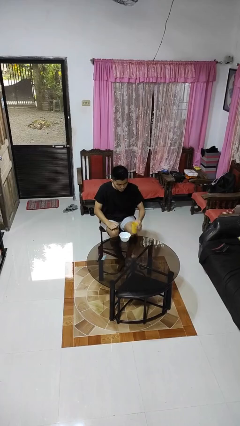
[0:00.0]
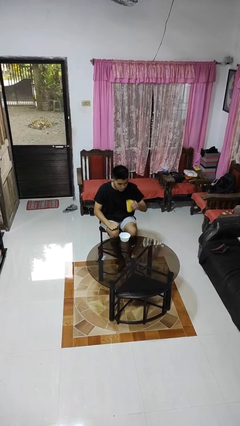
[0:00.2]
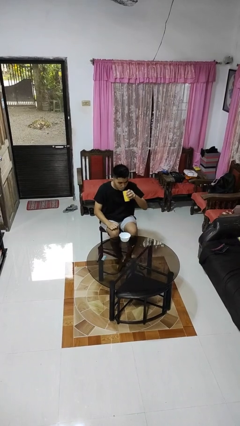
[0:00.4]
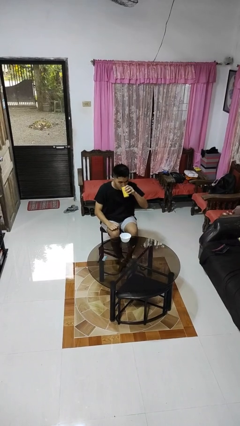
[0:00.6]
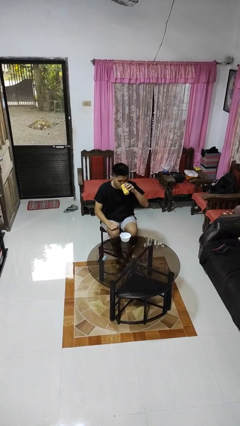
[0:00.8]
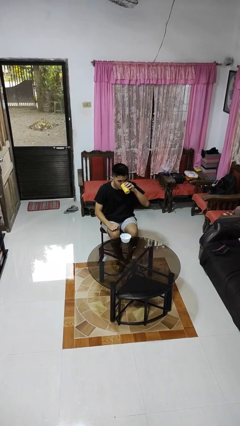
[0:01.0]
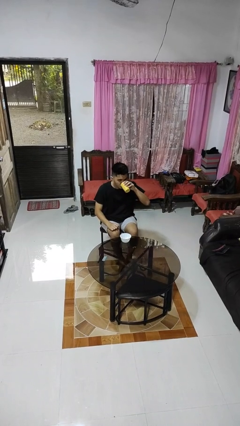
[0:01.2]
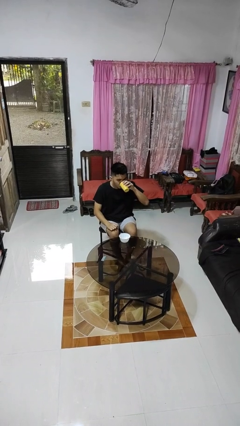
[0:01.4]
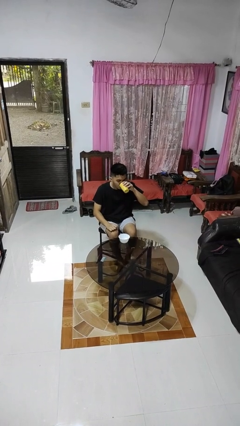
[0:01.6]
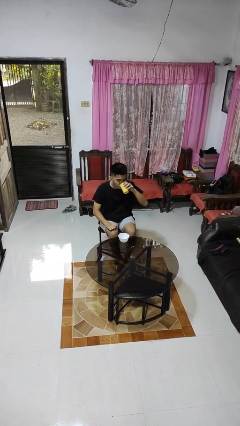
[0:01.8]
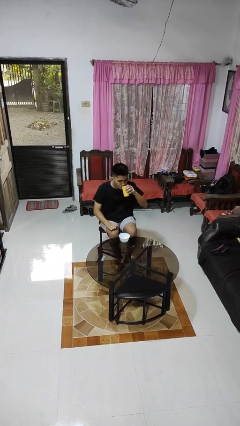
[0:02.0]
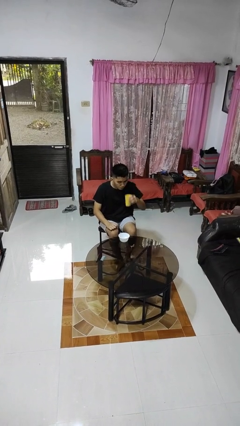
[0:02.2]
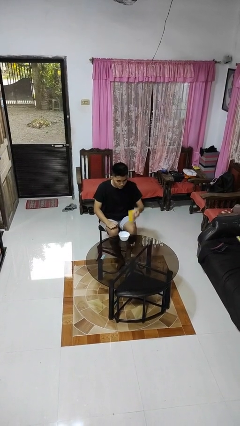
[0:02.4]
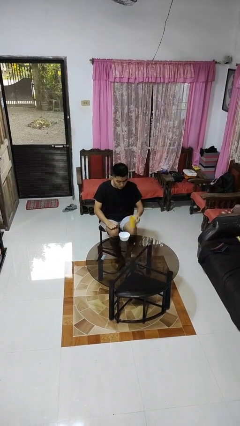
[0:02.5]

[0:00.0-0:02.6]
person drinks from cup

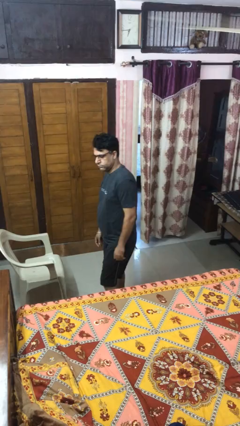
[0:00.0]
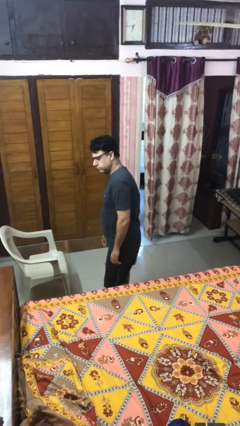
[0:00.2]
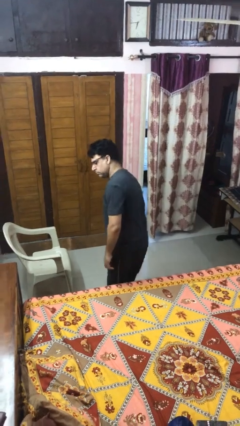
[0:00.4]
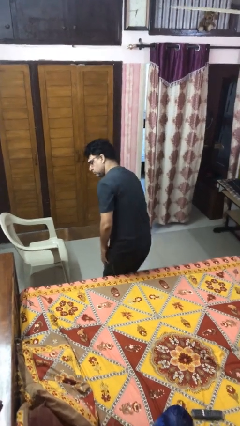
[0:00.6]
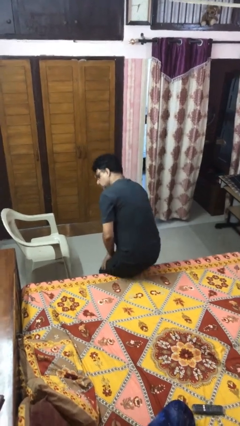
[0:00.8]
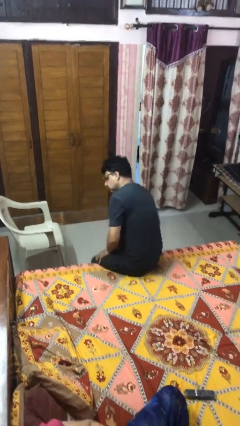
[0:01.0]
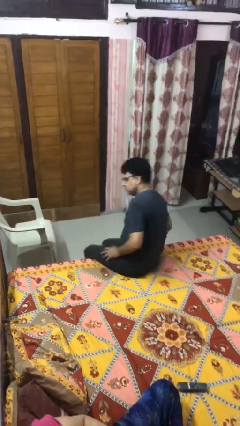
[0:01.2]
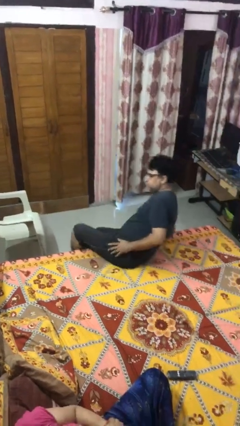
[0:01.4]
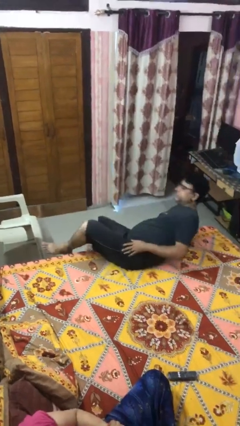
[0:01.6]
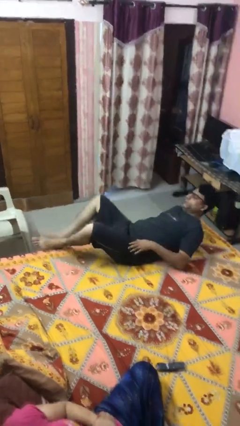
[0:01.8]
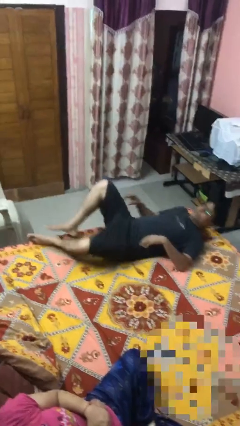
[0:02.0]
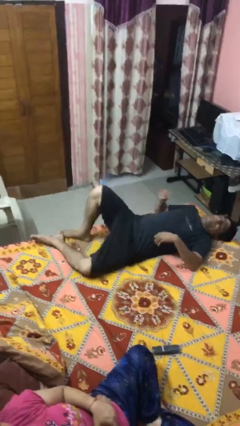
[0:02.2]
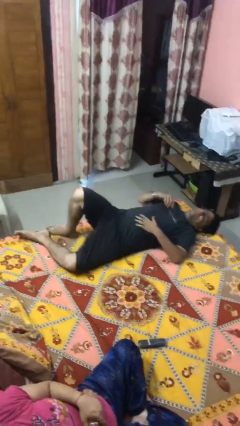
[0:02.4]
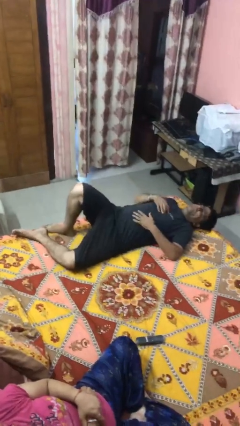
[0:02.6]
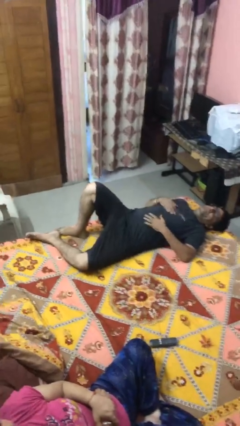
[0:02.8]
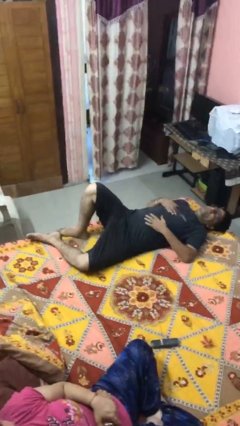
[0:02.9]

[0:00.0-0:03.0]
person lies down on bed

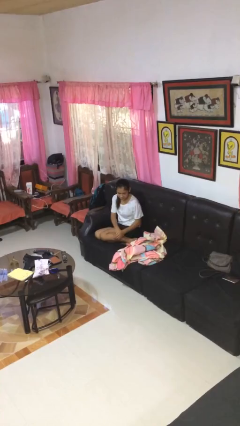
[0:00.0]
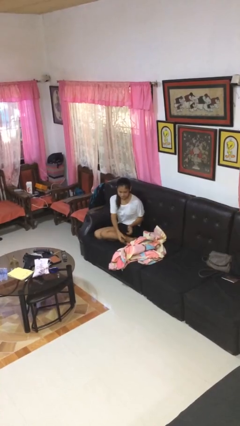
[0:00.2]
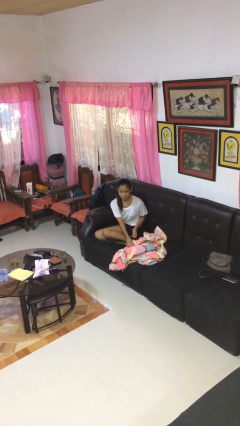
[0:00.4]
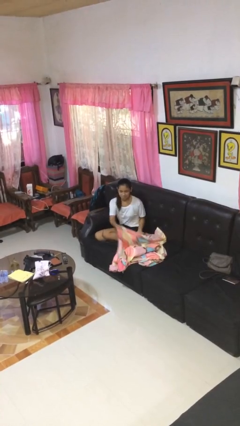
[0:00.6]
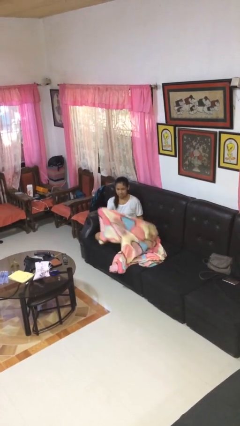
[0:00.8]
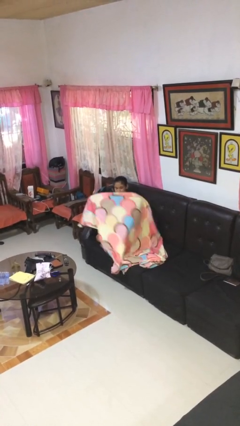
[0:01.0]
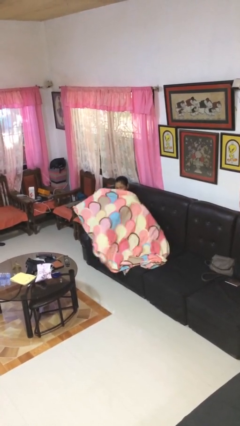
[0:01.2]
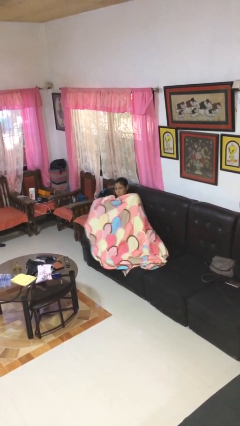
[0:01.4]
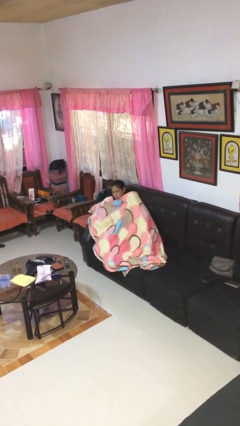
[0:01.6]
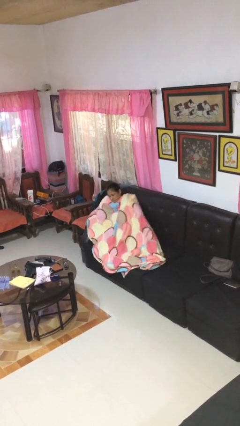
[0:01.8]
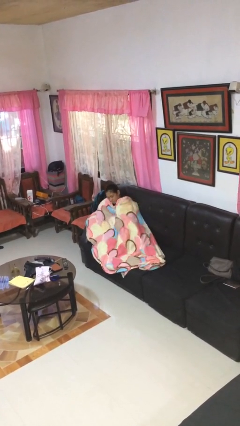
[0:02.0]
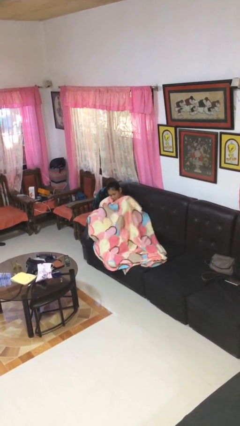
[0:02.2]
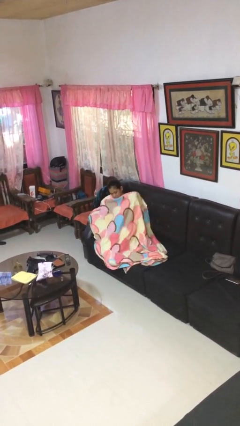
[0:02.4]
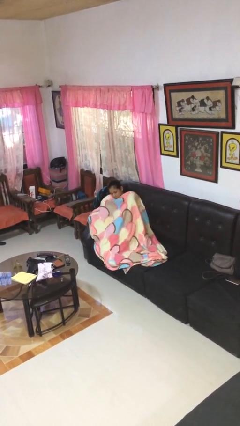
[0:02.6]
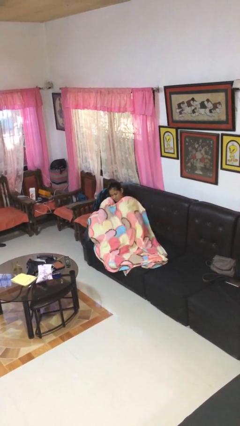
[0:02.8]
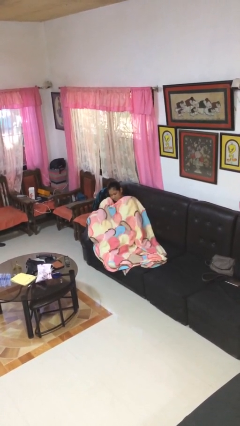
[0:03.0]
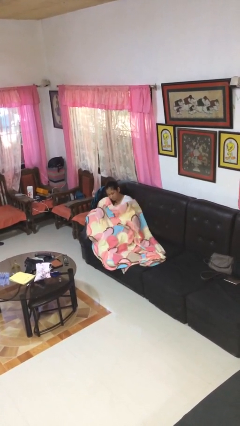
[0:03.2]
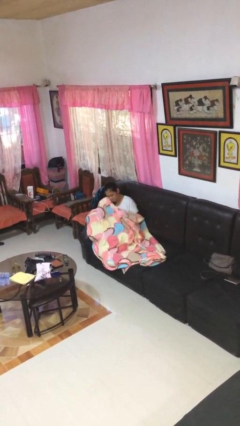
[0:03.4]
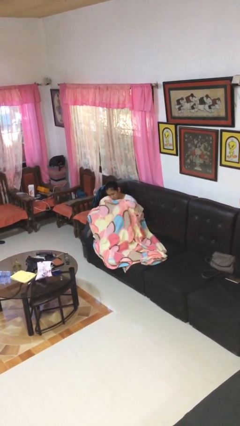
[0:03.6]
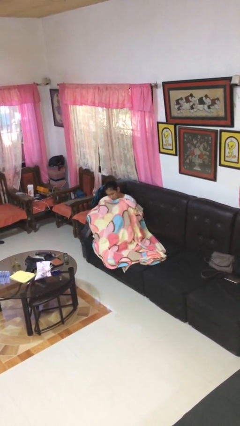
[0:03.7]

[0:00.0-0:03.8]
person covers with blanket

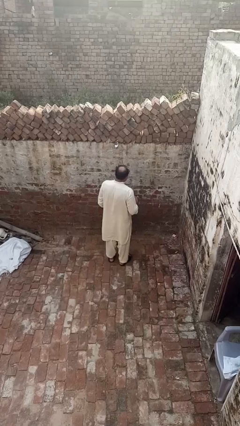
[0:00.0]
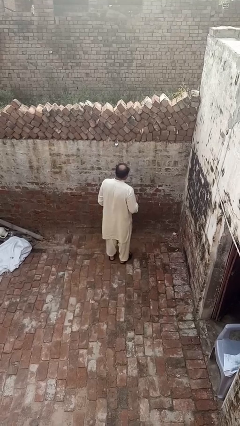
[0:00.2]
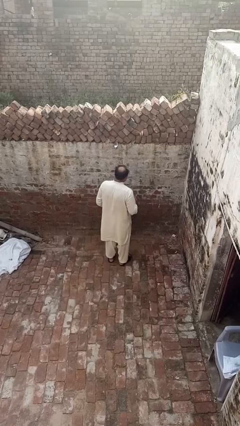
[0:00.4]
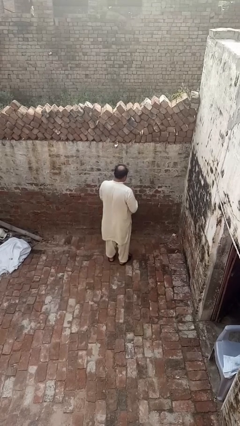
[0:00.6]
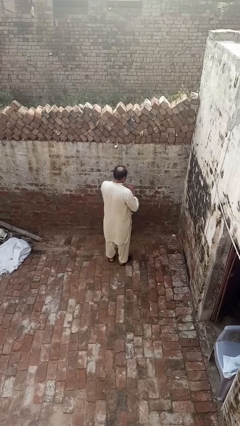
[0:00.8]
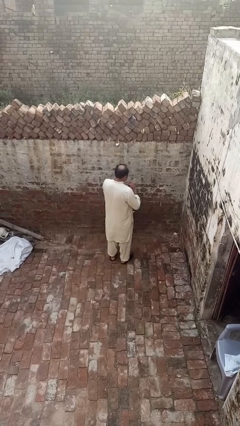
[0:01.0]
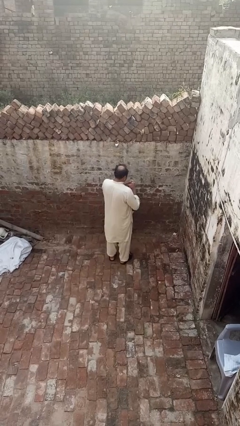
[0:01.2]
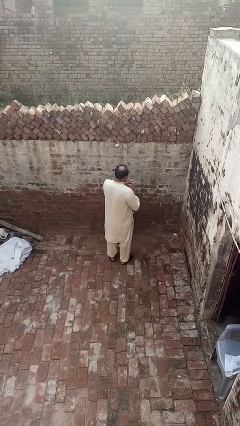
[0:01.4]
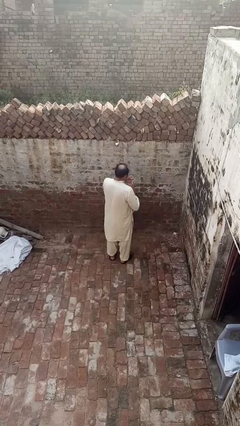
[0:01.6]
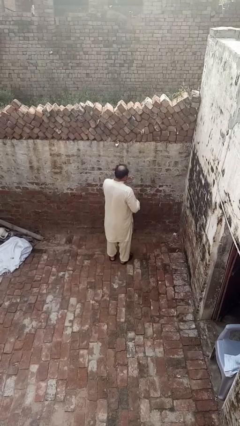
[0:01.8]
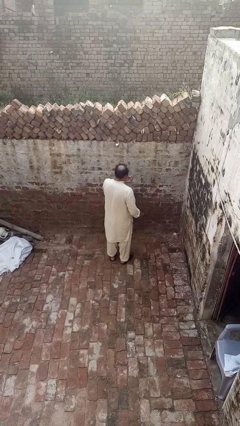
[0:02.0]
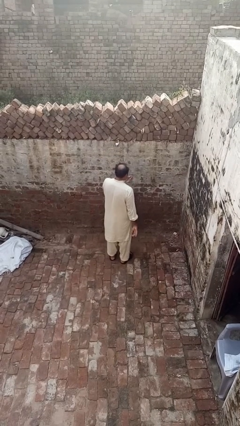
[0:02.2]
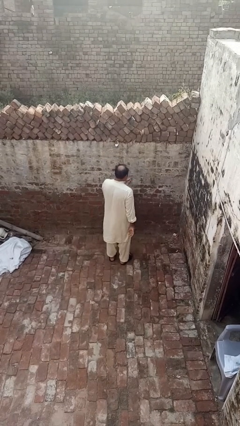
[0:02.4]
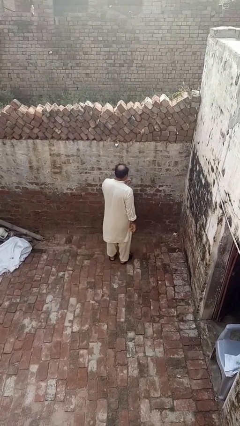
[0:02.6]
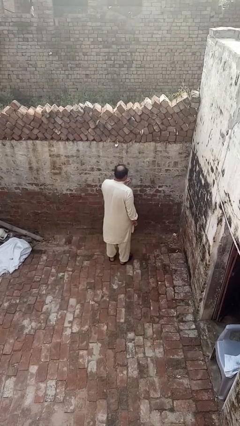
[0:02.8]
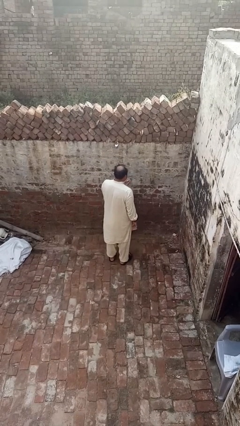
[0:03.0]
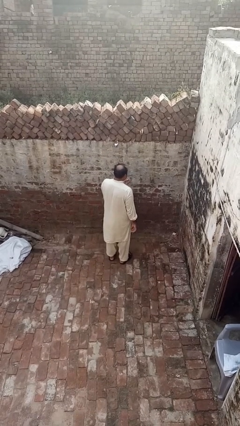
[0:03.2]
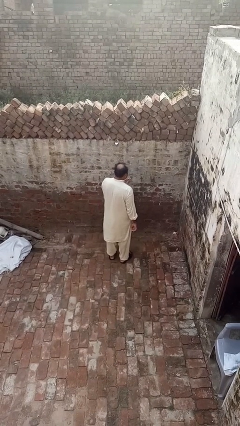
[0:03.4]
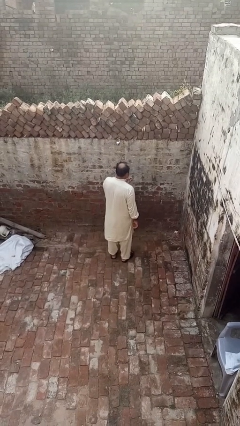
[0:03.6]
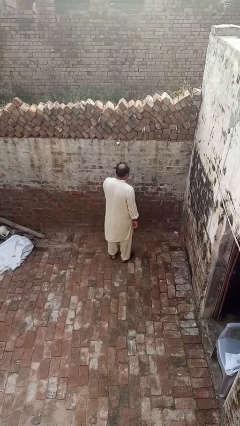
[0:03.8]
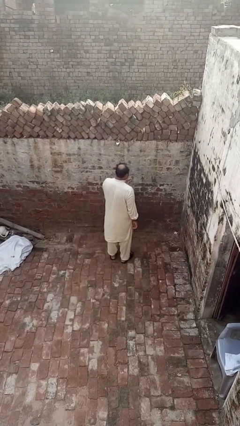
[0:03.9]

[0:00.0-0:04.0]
person takes off ring

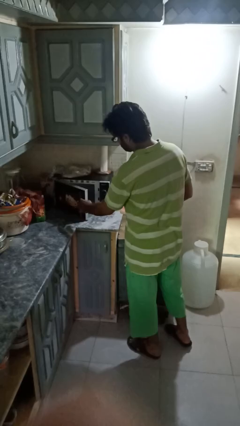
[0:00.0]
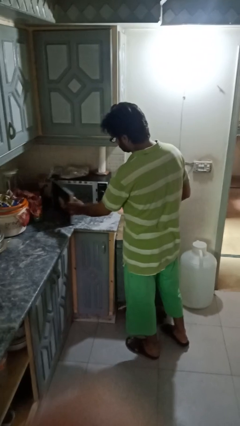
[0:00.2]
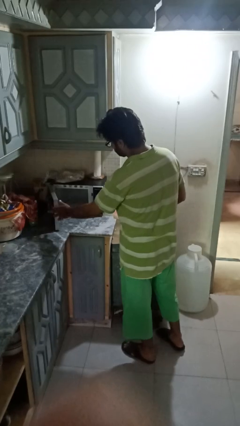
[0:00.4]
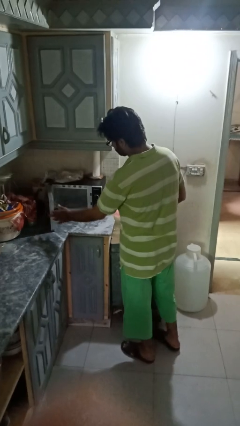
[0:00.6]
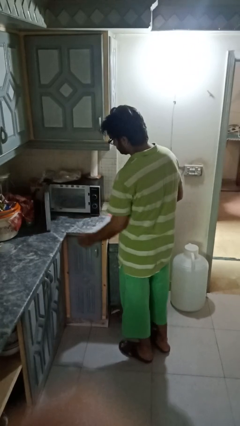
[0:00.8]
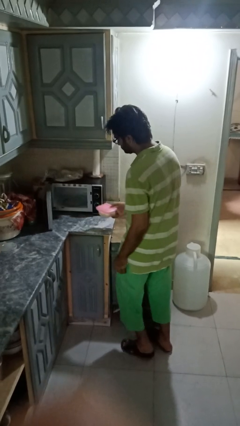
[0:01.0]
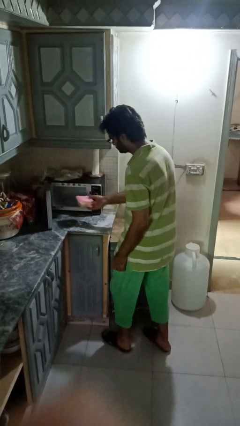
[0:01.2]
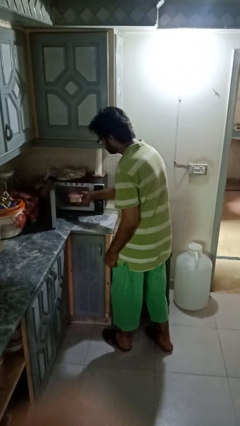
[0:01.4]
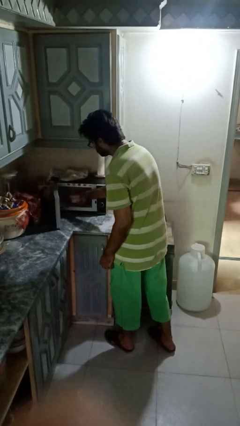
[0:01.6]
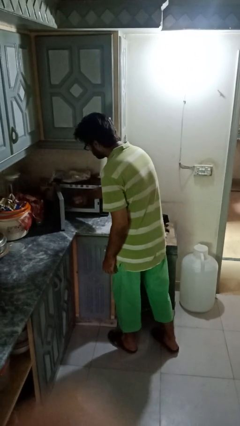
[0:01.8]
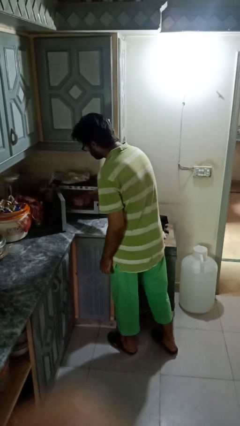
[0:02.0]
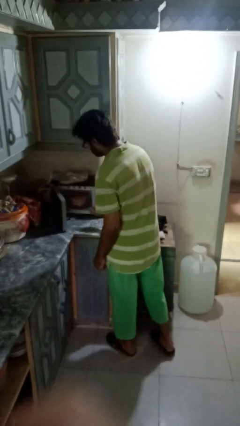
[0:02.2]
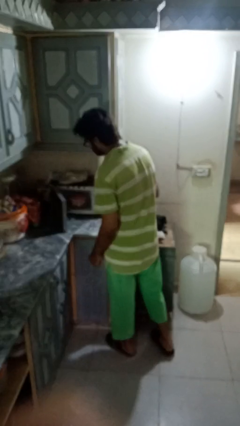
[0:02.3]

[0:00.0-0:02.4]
person puts object into microwave

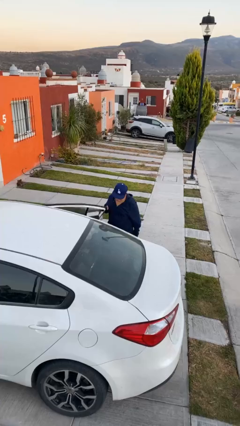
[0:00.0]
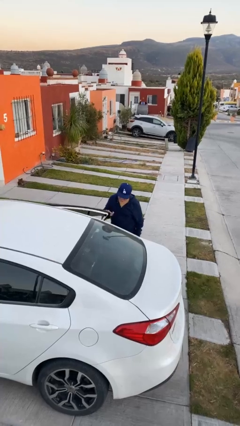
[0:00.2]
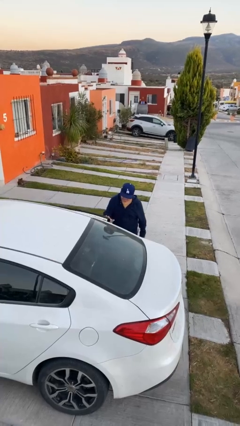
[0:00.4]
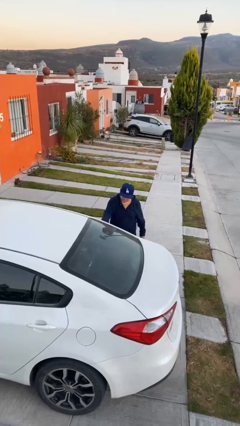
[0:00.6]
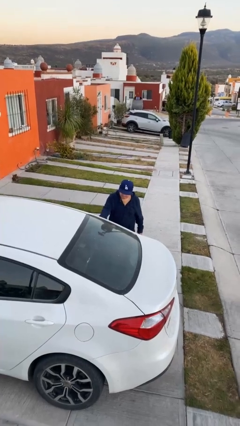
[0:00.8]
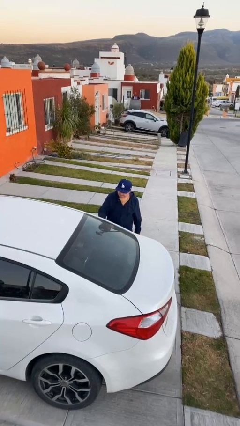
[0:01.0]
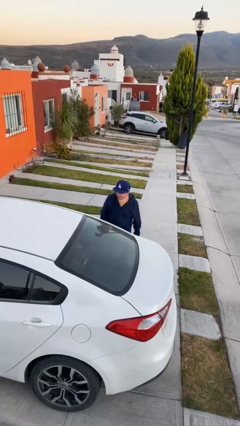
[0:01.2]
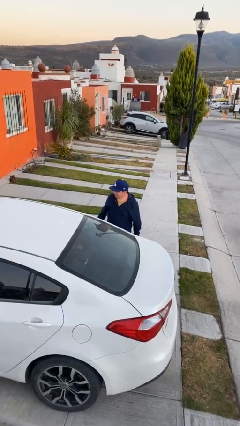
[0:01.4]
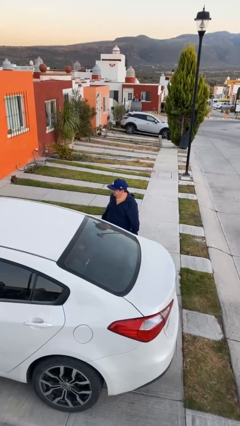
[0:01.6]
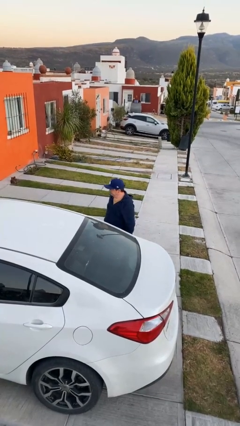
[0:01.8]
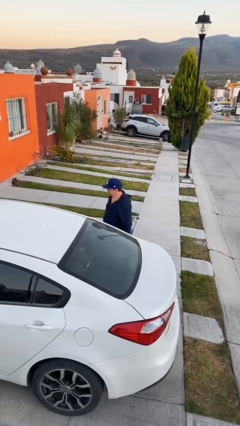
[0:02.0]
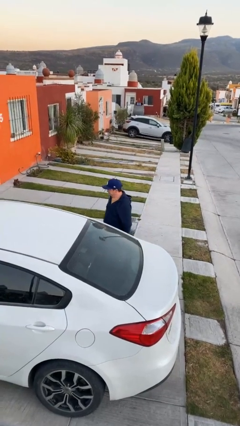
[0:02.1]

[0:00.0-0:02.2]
person closes car door
